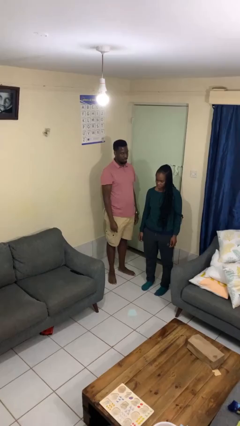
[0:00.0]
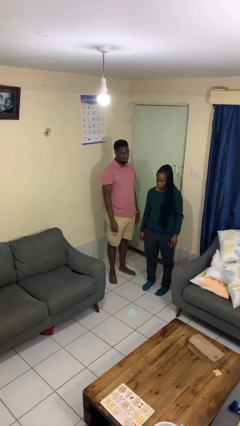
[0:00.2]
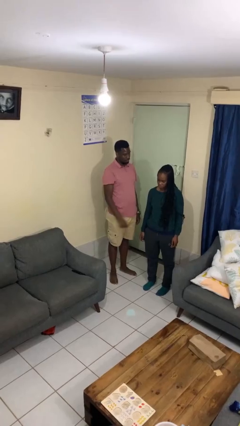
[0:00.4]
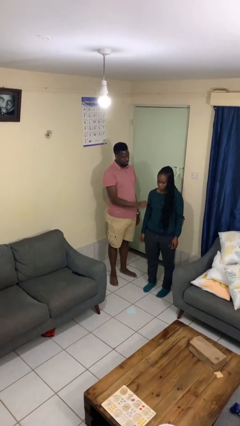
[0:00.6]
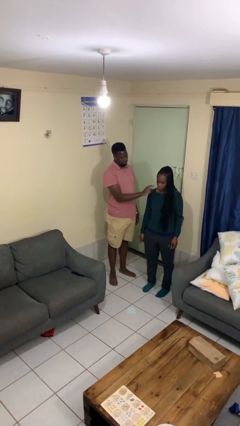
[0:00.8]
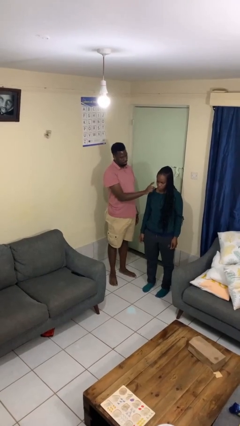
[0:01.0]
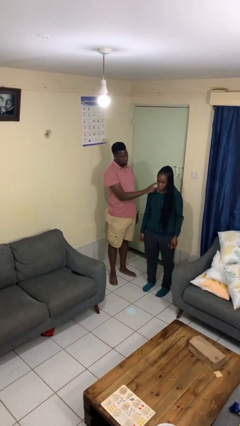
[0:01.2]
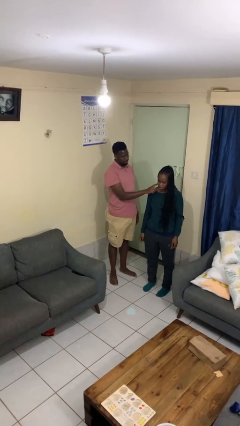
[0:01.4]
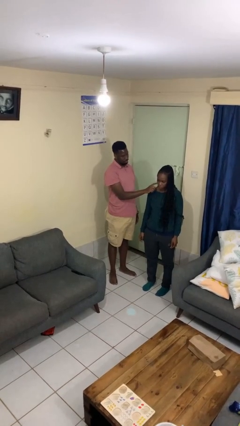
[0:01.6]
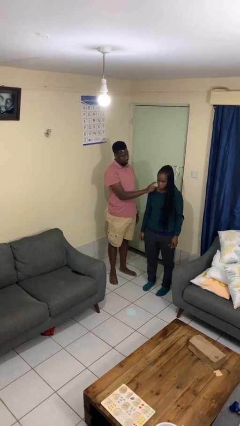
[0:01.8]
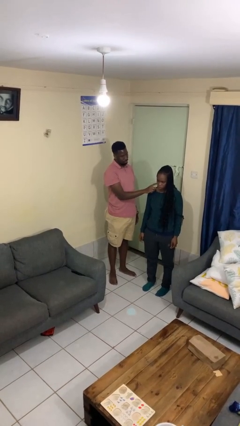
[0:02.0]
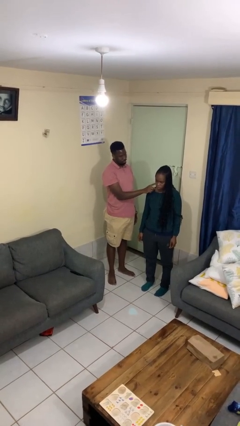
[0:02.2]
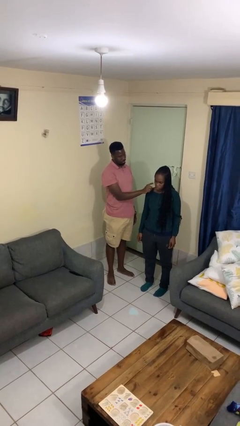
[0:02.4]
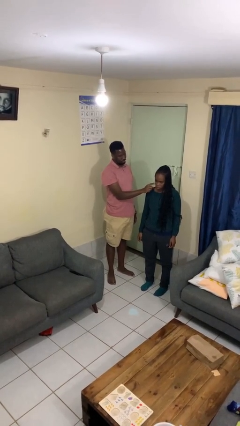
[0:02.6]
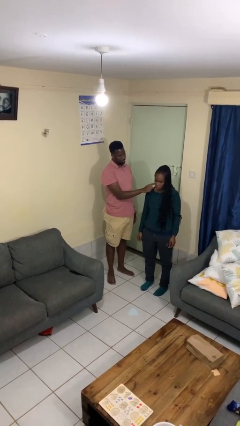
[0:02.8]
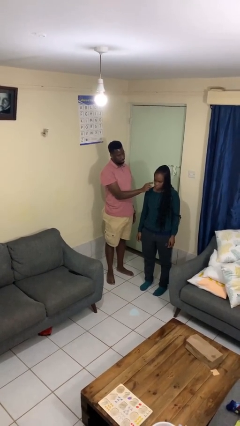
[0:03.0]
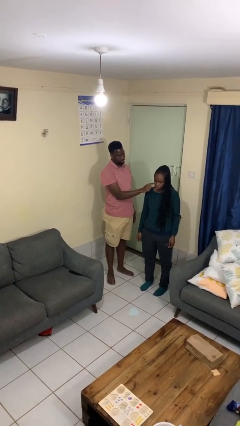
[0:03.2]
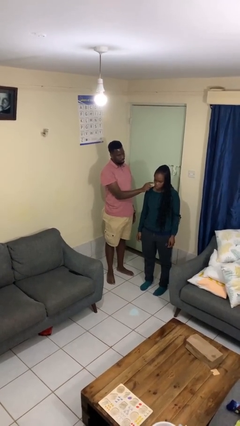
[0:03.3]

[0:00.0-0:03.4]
person touches face of person

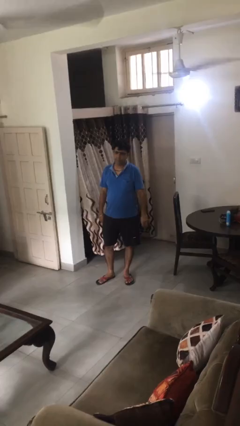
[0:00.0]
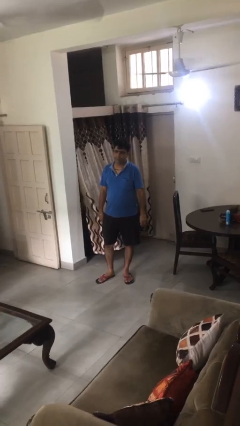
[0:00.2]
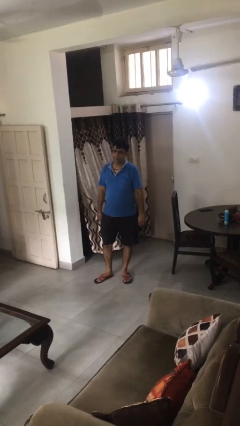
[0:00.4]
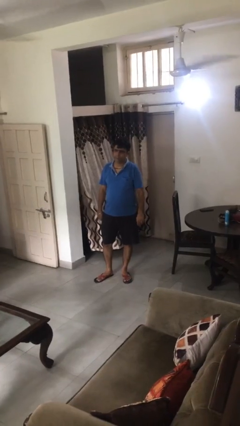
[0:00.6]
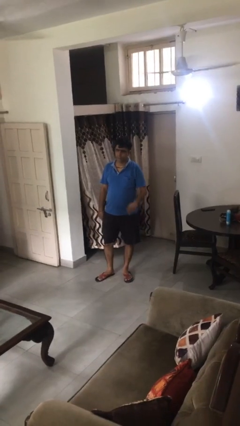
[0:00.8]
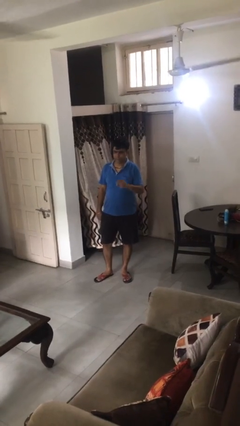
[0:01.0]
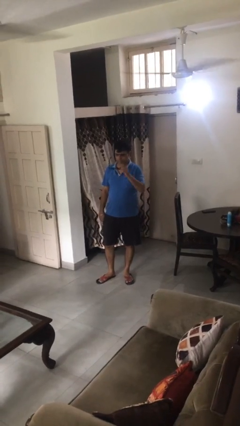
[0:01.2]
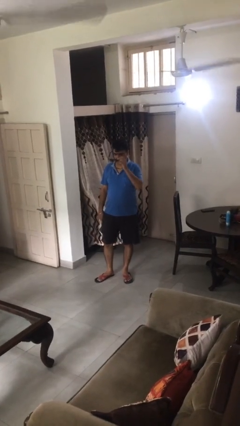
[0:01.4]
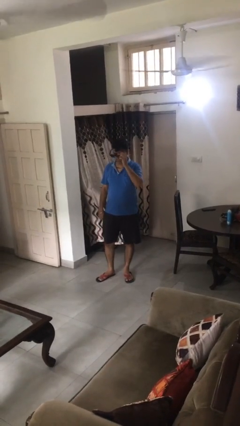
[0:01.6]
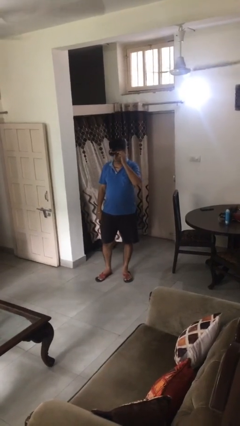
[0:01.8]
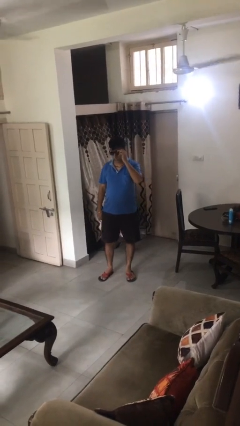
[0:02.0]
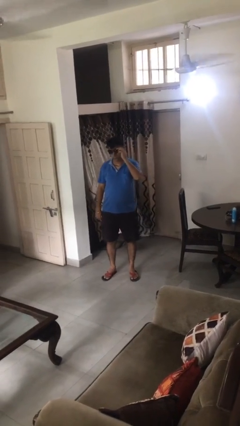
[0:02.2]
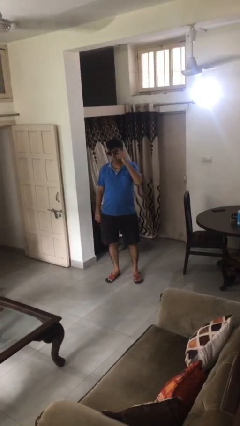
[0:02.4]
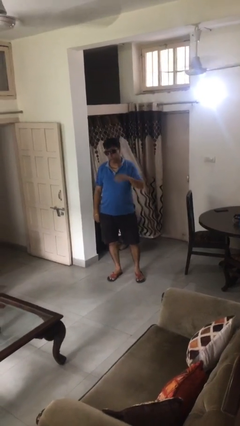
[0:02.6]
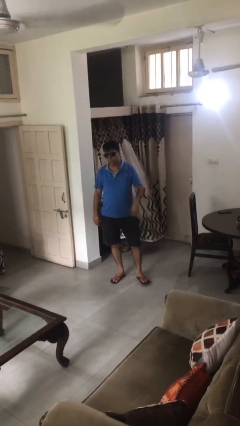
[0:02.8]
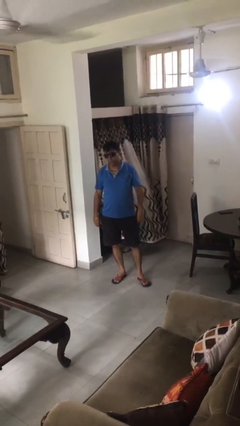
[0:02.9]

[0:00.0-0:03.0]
person puts on sunglasses

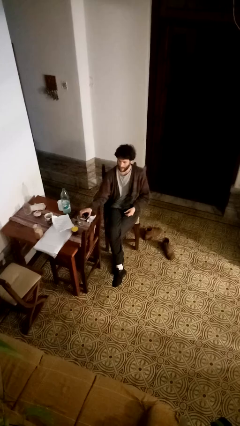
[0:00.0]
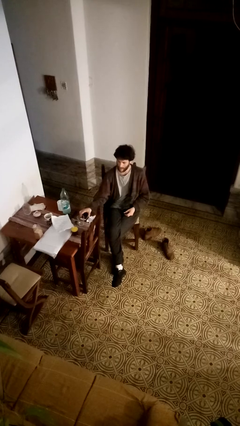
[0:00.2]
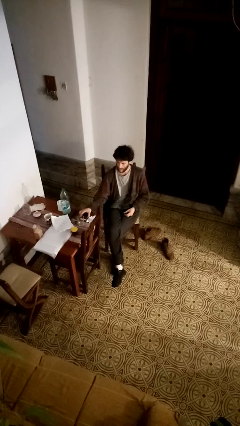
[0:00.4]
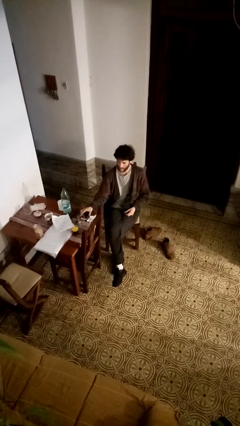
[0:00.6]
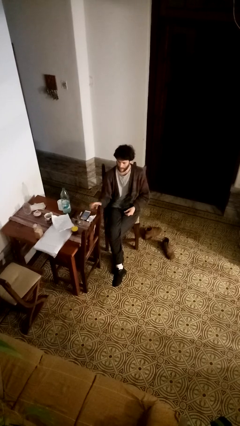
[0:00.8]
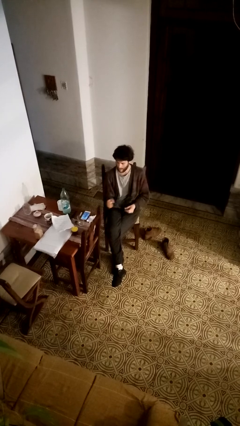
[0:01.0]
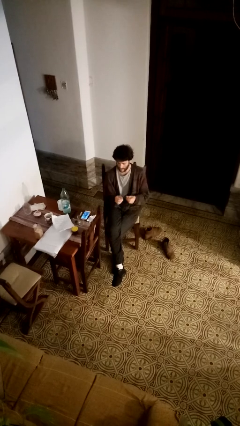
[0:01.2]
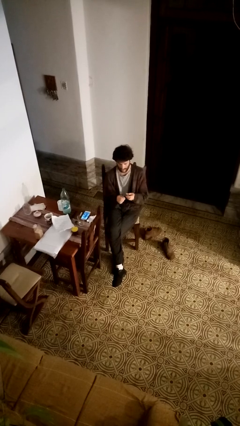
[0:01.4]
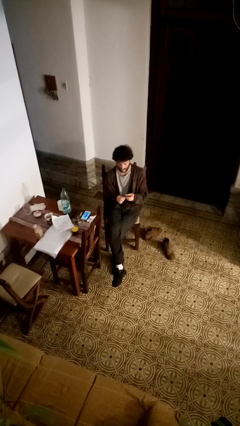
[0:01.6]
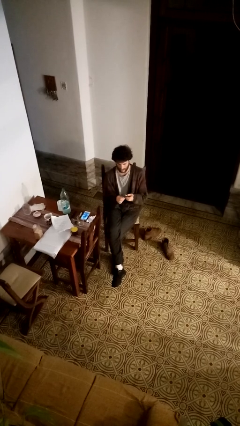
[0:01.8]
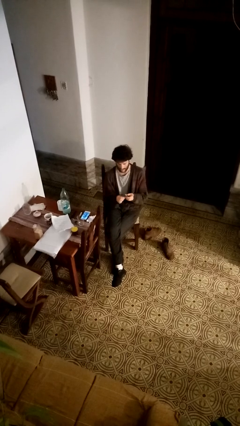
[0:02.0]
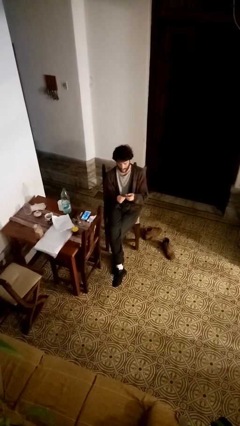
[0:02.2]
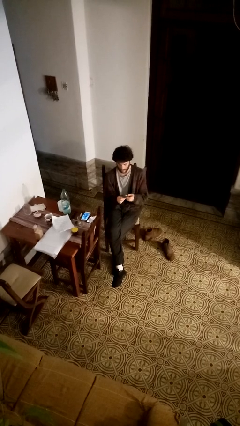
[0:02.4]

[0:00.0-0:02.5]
person clips fingernails

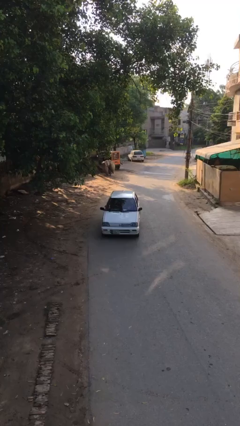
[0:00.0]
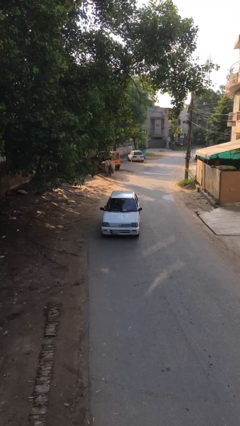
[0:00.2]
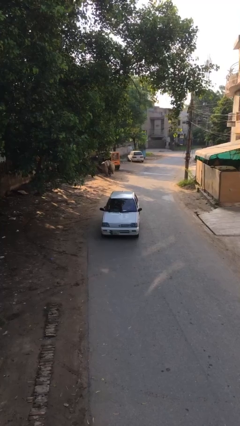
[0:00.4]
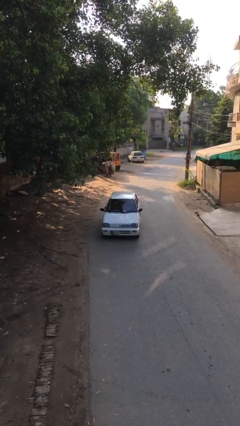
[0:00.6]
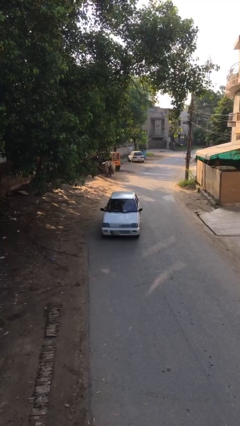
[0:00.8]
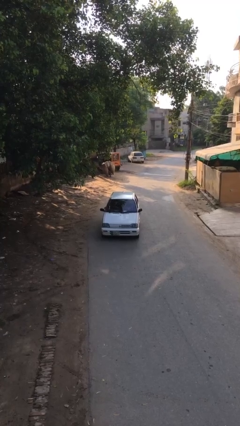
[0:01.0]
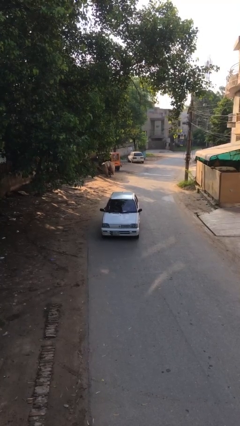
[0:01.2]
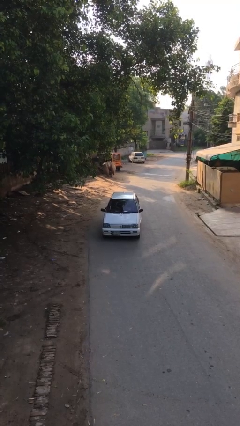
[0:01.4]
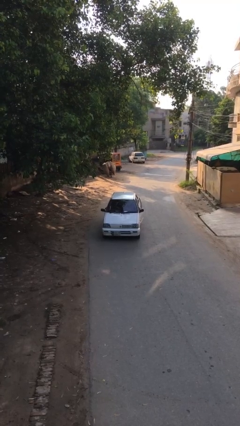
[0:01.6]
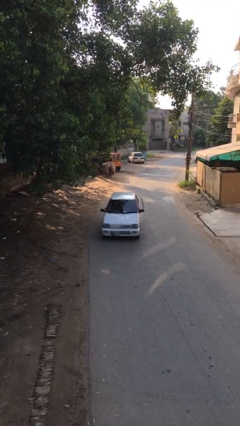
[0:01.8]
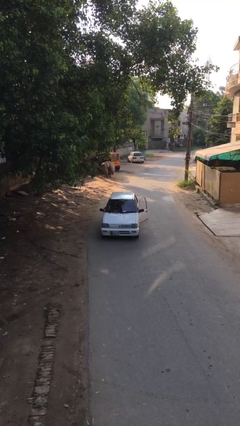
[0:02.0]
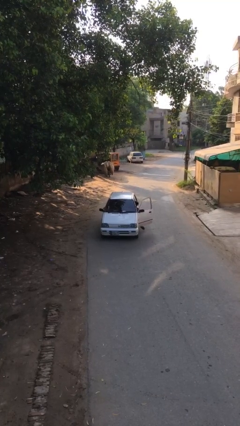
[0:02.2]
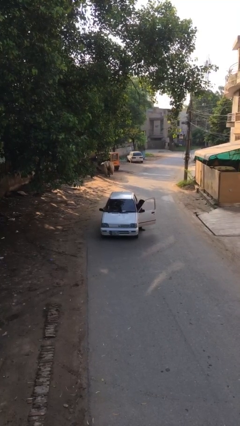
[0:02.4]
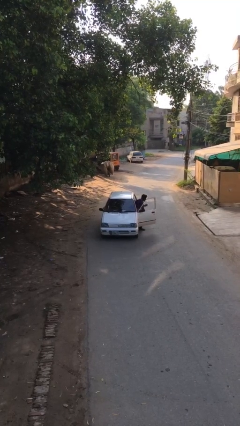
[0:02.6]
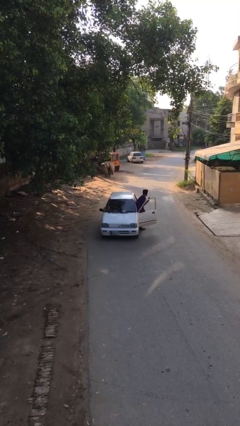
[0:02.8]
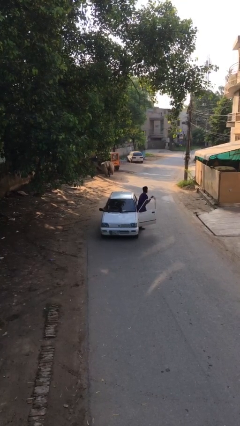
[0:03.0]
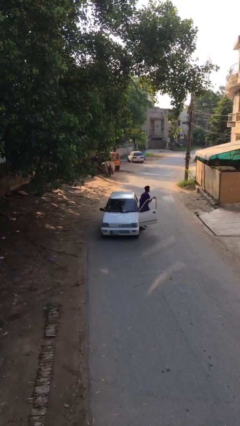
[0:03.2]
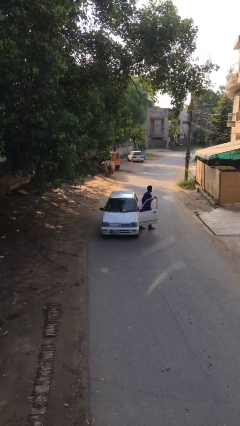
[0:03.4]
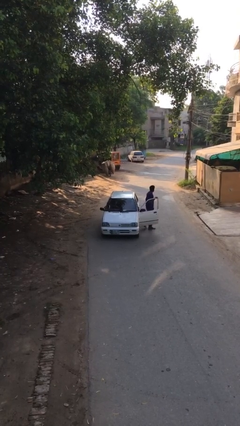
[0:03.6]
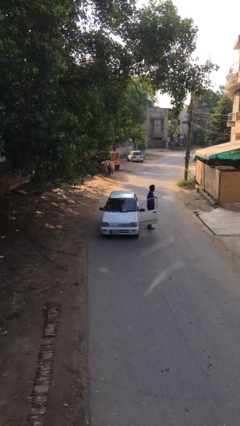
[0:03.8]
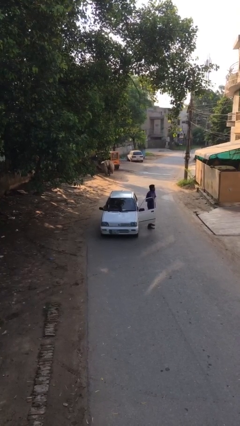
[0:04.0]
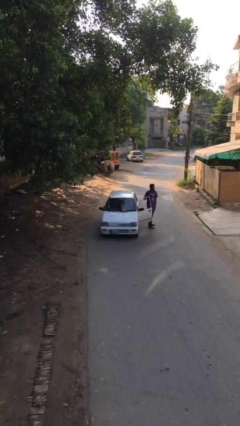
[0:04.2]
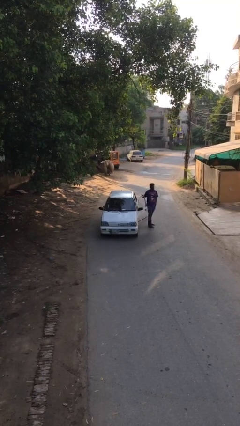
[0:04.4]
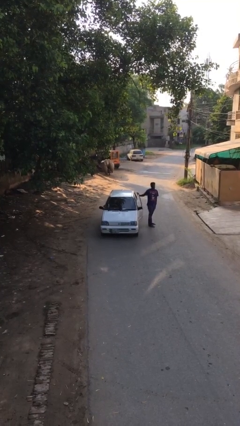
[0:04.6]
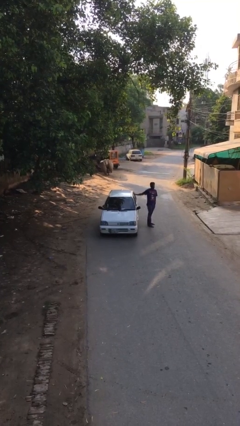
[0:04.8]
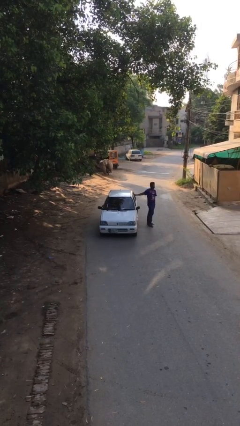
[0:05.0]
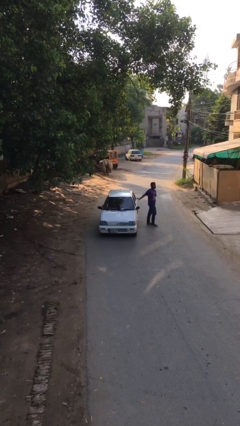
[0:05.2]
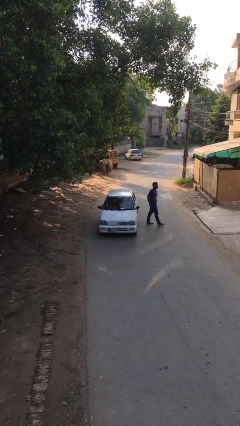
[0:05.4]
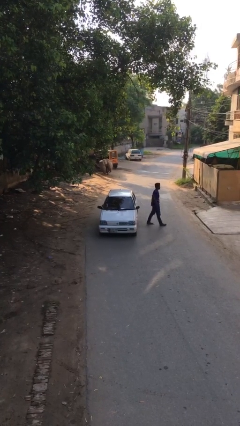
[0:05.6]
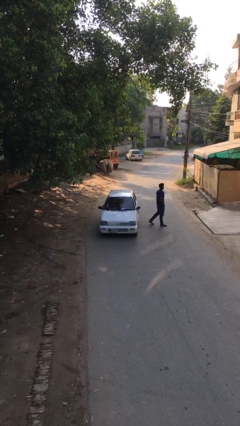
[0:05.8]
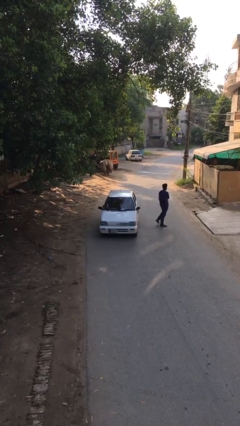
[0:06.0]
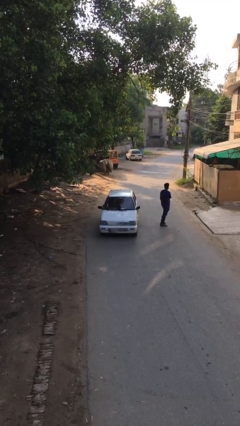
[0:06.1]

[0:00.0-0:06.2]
car drops off person

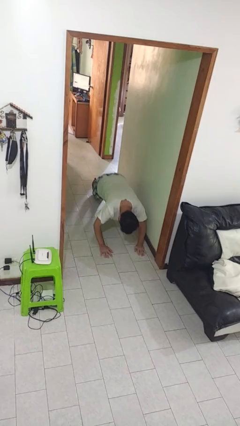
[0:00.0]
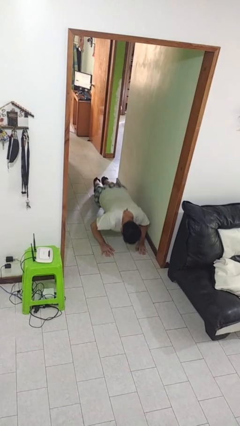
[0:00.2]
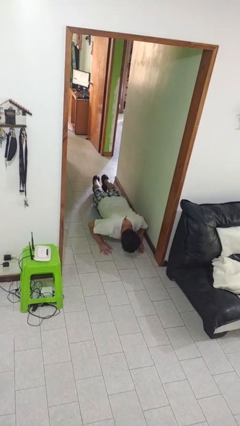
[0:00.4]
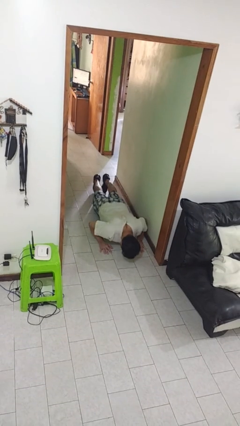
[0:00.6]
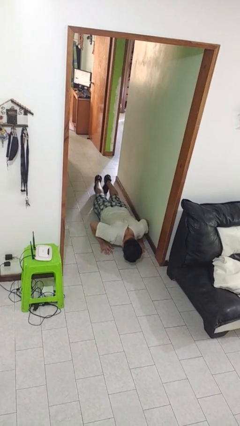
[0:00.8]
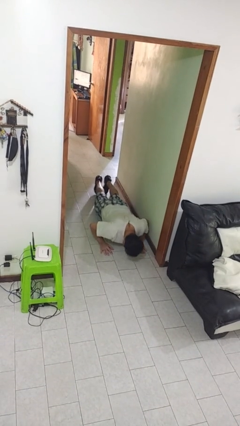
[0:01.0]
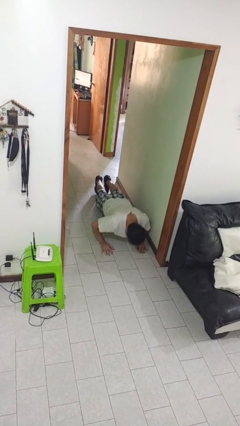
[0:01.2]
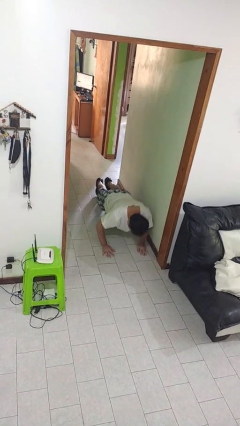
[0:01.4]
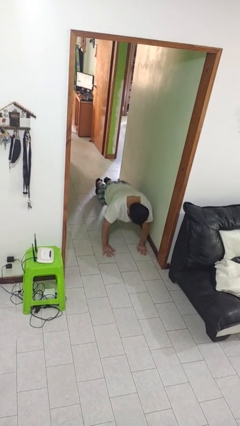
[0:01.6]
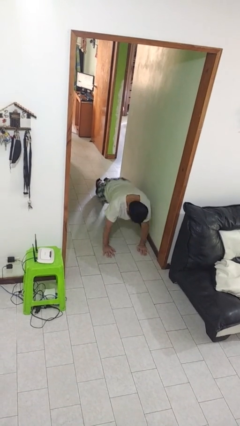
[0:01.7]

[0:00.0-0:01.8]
person exercises with pushup

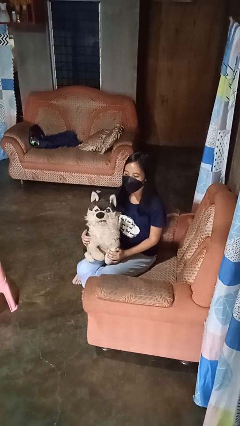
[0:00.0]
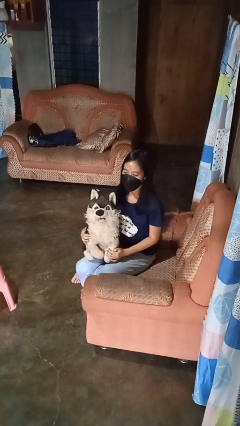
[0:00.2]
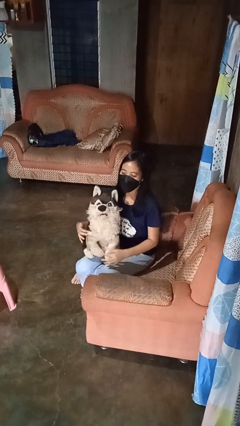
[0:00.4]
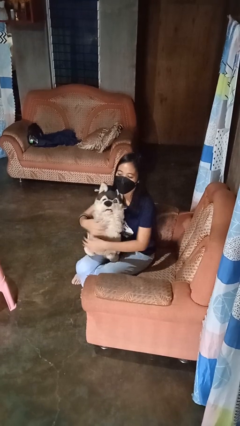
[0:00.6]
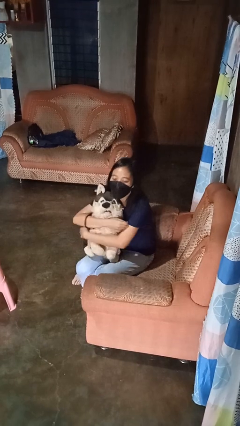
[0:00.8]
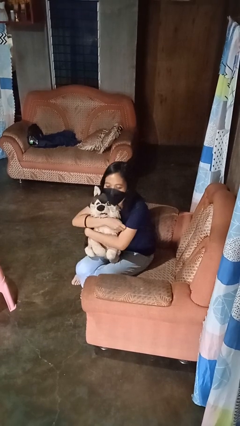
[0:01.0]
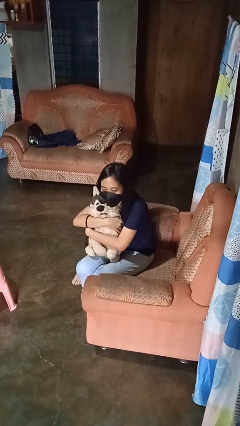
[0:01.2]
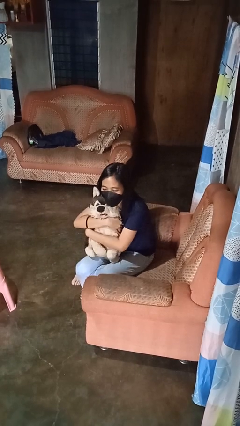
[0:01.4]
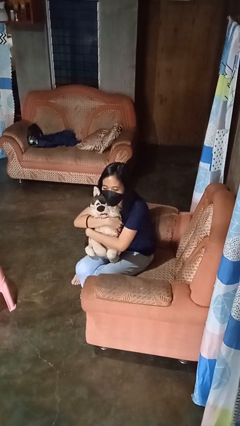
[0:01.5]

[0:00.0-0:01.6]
person hugs stuffed animal
